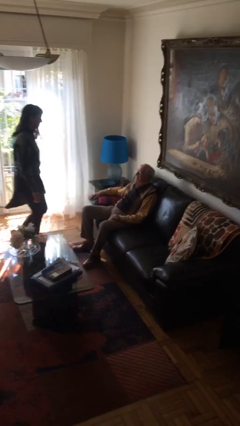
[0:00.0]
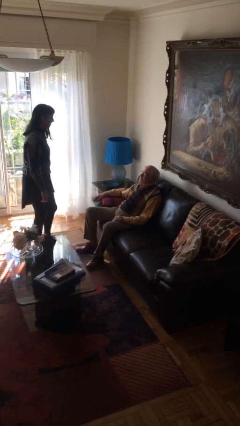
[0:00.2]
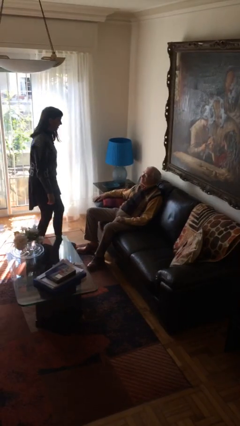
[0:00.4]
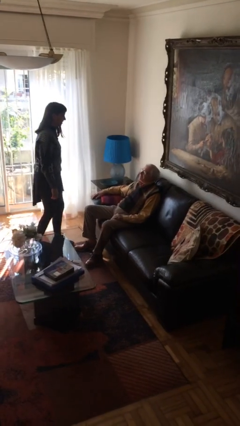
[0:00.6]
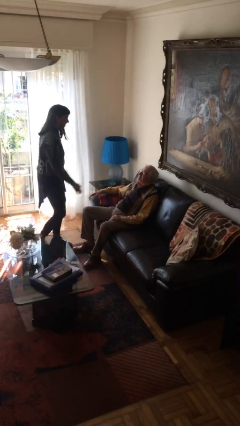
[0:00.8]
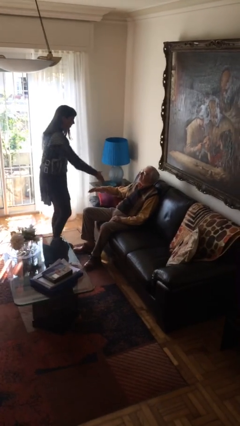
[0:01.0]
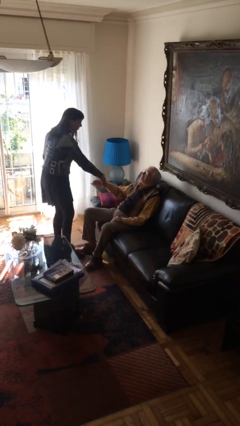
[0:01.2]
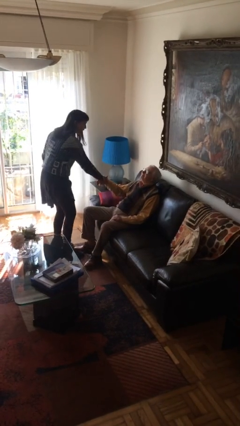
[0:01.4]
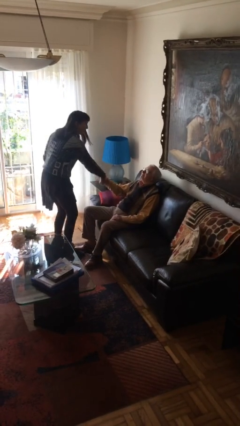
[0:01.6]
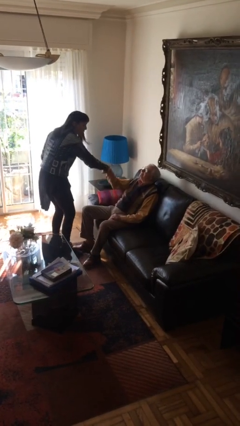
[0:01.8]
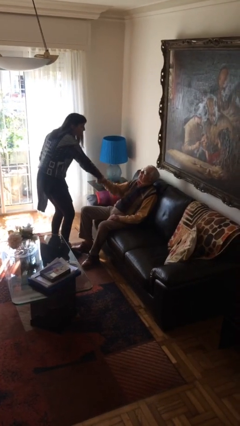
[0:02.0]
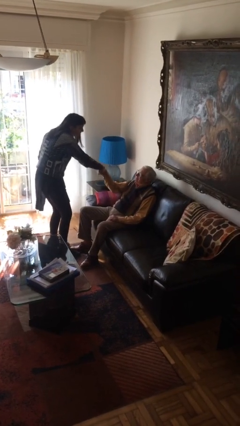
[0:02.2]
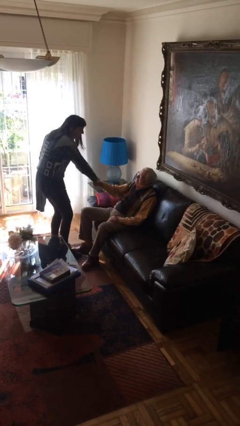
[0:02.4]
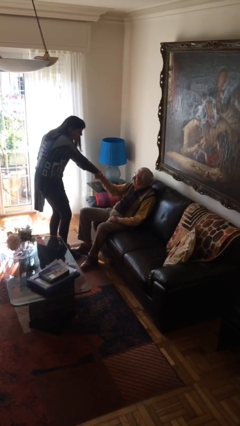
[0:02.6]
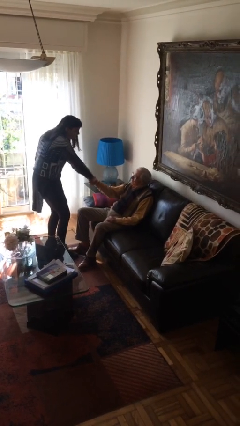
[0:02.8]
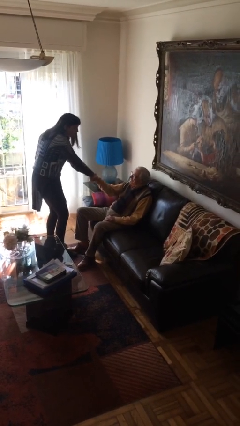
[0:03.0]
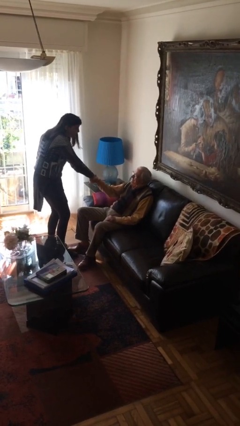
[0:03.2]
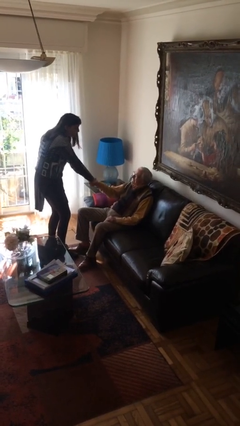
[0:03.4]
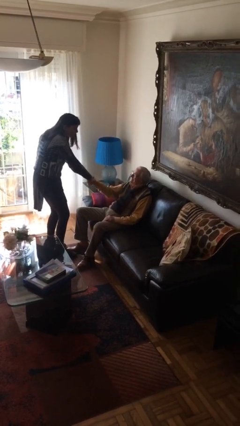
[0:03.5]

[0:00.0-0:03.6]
person shakes hand

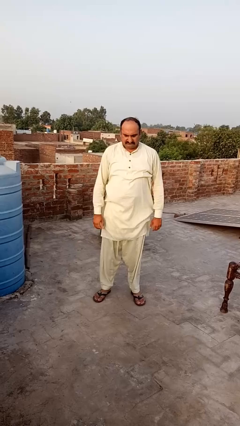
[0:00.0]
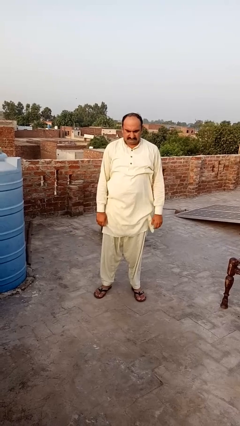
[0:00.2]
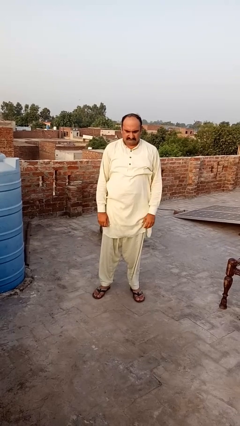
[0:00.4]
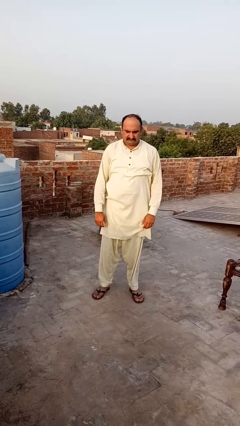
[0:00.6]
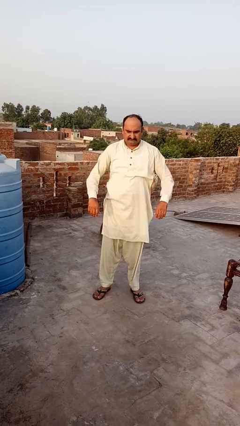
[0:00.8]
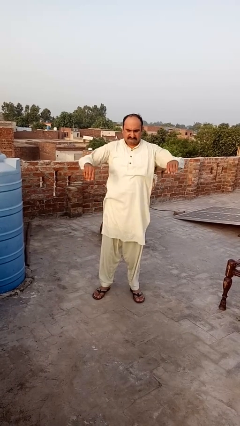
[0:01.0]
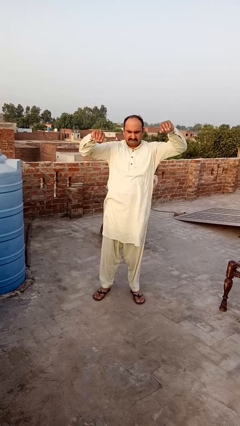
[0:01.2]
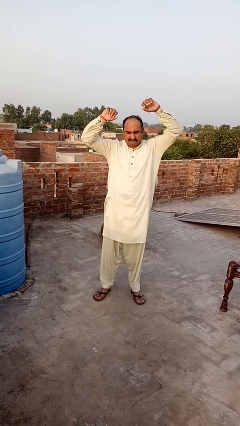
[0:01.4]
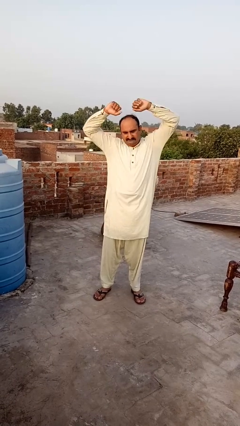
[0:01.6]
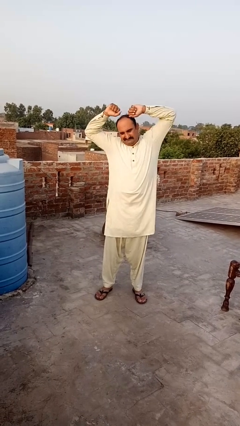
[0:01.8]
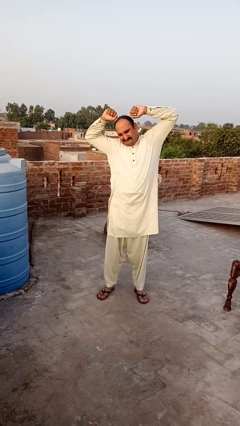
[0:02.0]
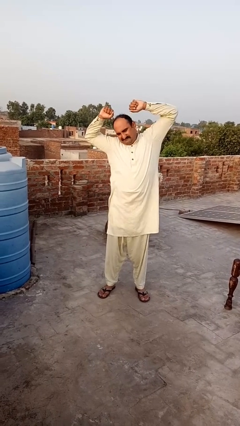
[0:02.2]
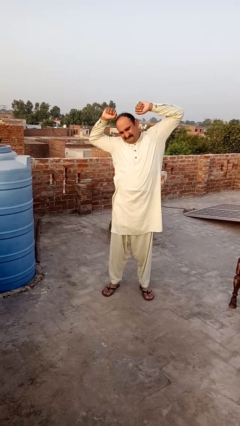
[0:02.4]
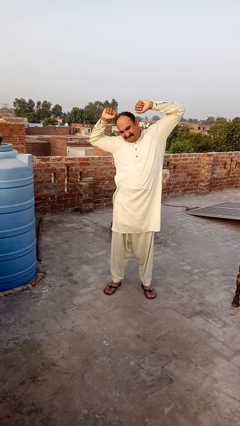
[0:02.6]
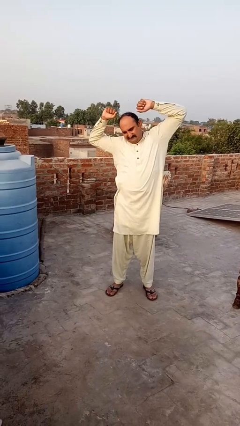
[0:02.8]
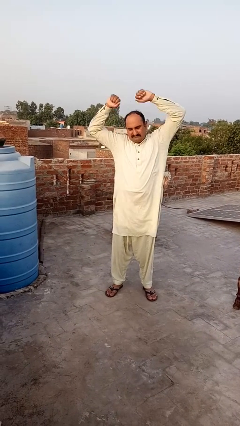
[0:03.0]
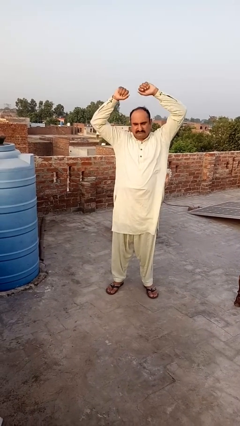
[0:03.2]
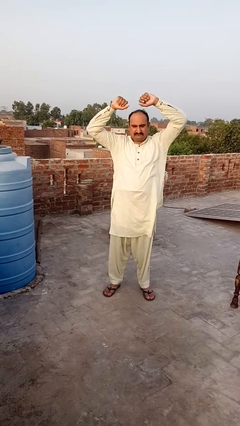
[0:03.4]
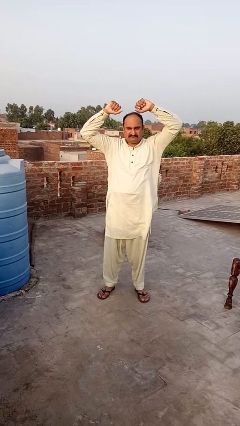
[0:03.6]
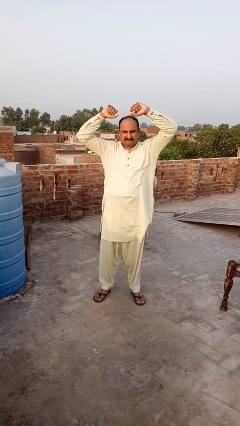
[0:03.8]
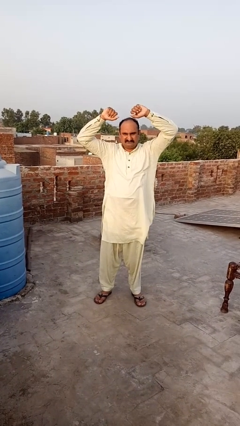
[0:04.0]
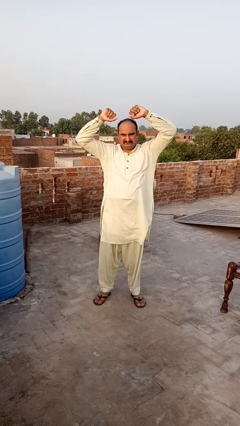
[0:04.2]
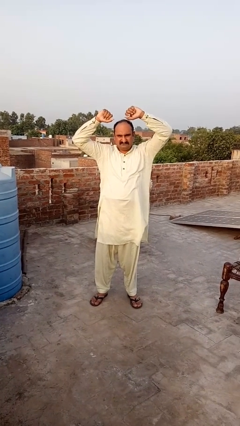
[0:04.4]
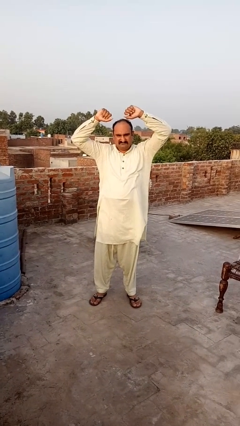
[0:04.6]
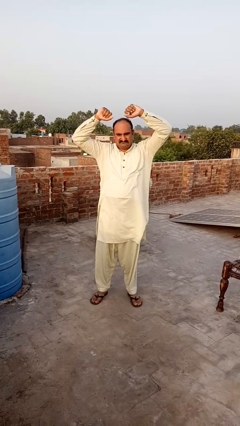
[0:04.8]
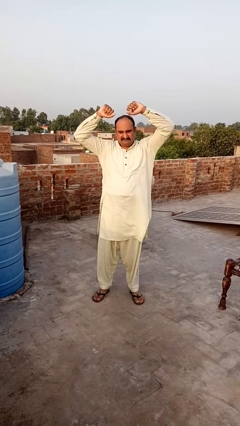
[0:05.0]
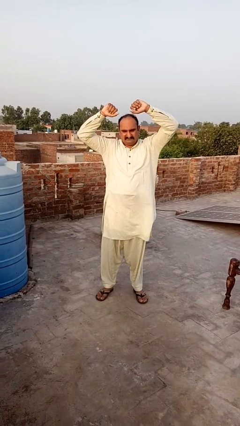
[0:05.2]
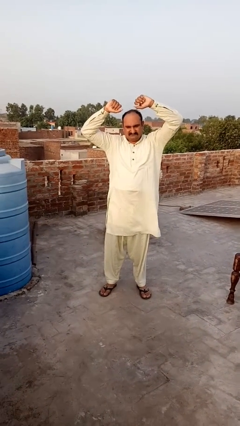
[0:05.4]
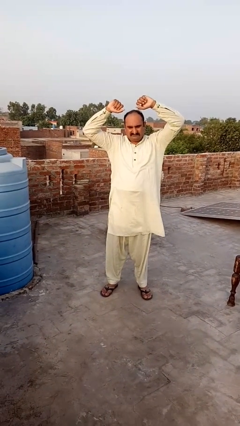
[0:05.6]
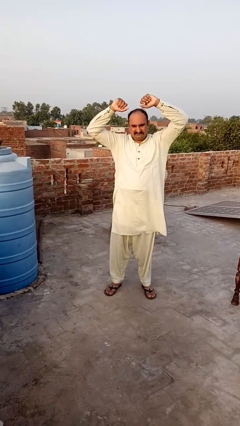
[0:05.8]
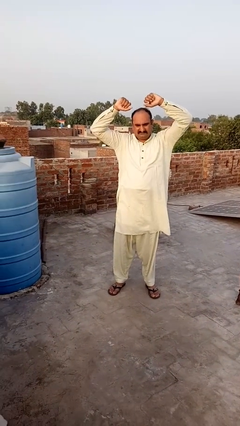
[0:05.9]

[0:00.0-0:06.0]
person stretches arms over head

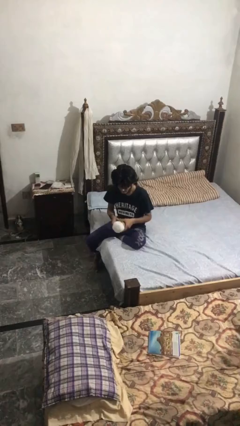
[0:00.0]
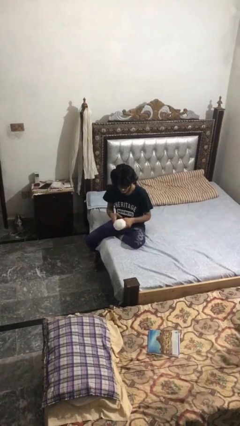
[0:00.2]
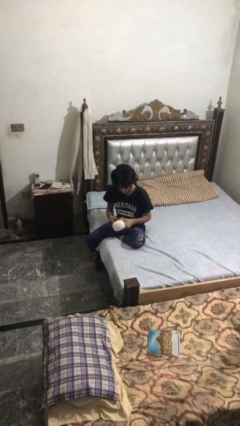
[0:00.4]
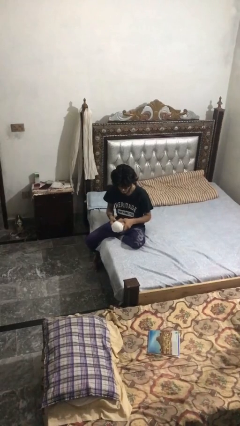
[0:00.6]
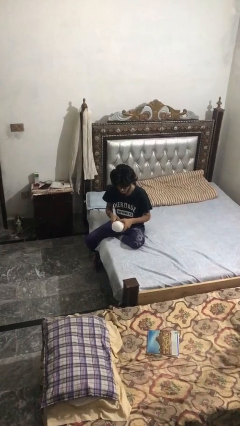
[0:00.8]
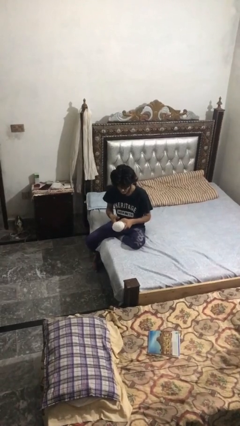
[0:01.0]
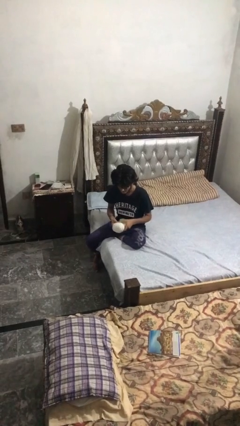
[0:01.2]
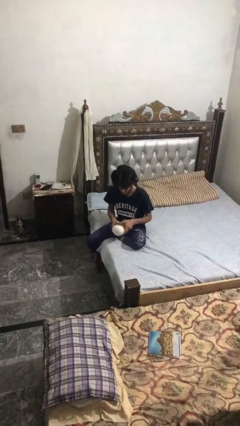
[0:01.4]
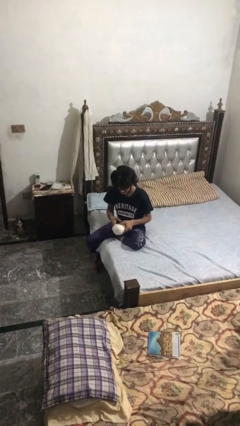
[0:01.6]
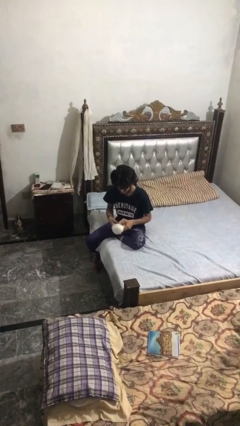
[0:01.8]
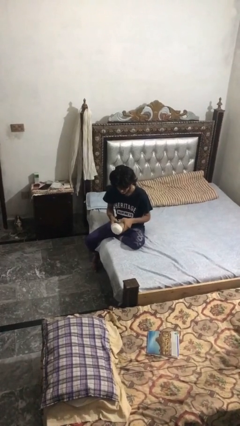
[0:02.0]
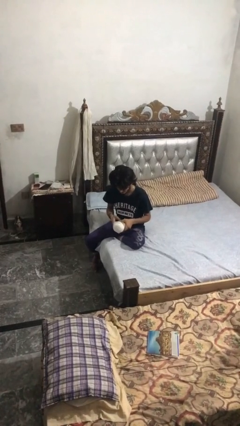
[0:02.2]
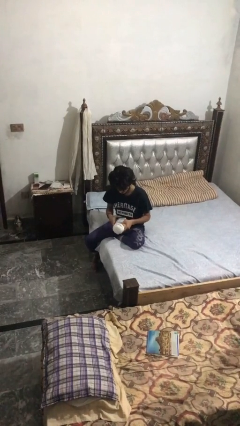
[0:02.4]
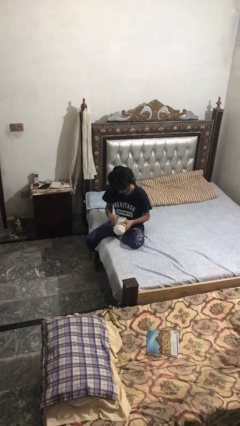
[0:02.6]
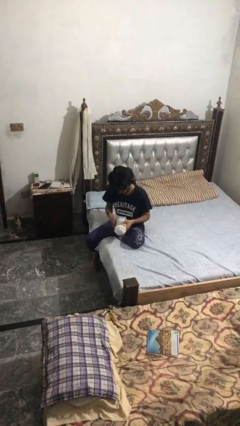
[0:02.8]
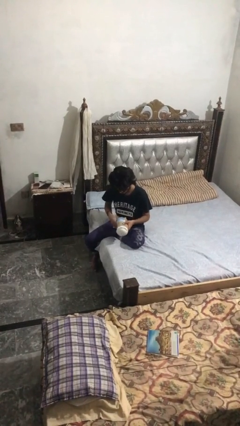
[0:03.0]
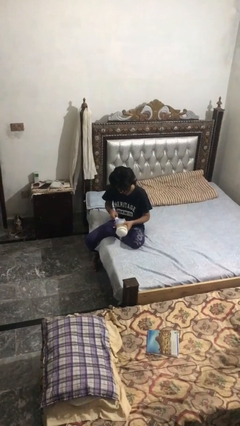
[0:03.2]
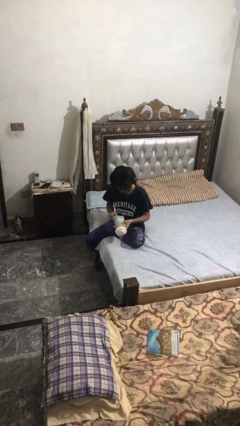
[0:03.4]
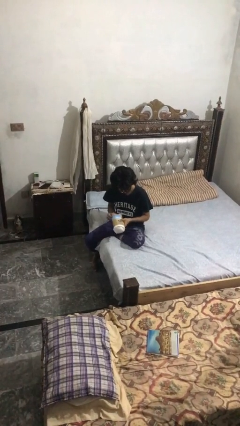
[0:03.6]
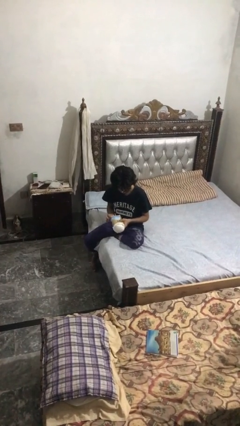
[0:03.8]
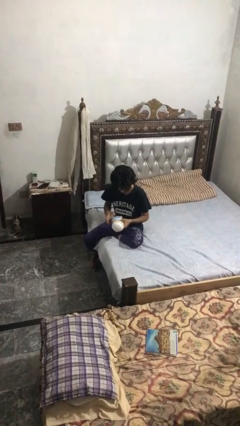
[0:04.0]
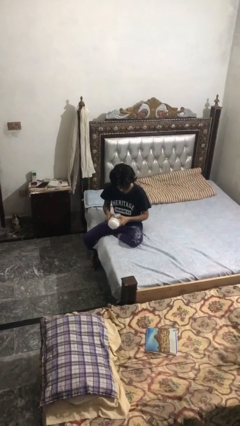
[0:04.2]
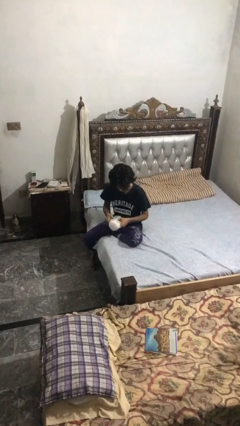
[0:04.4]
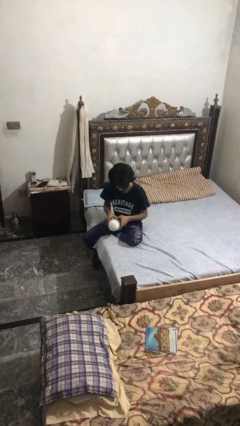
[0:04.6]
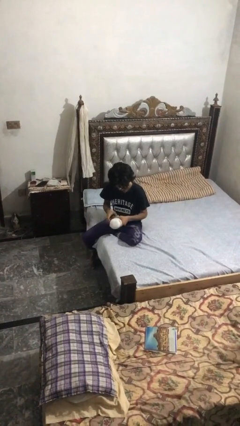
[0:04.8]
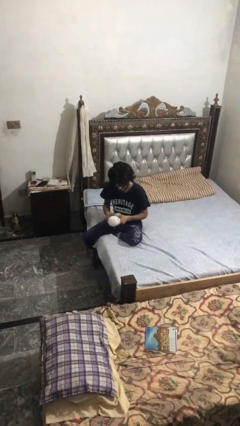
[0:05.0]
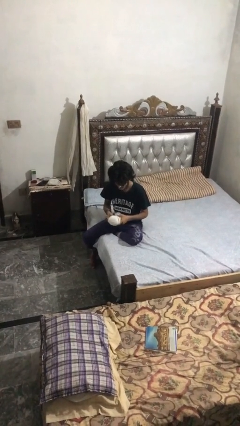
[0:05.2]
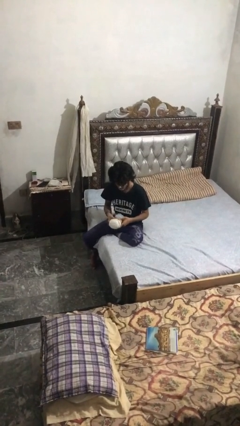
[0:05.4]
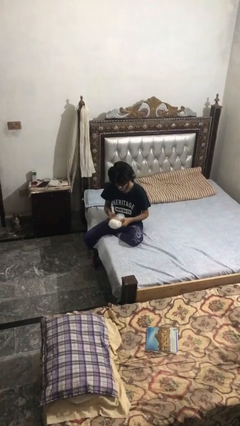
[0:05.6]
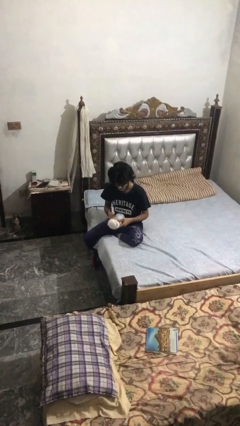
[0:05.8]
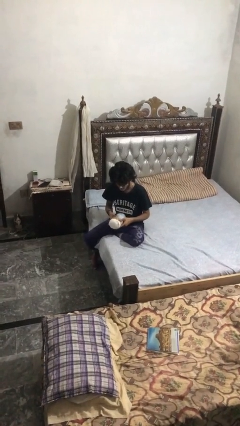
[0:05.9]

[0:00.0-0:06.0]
person squeezes object

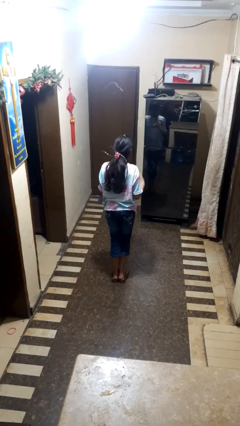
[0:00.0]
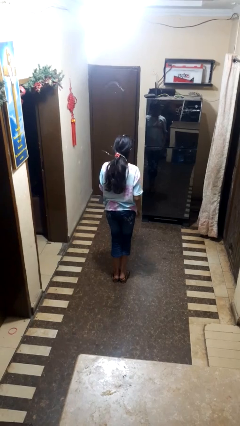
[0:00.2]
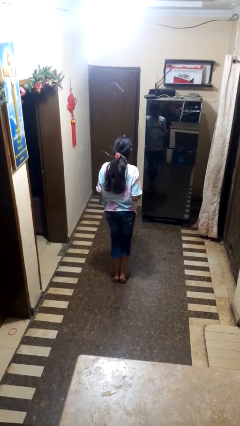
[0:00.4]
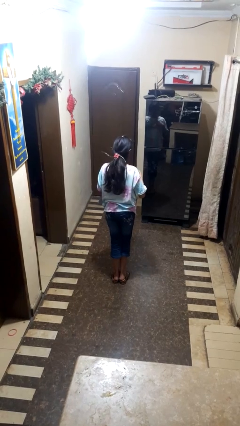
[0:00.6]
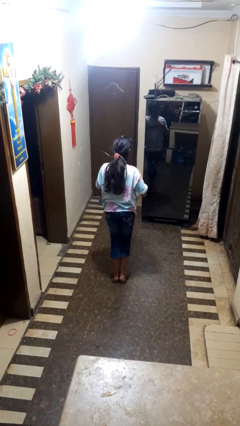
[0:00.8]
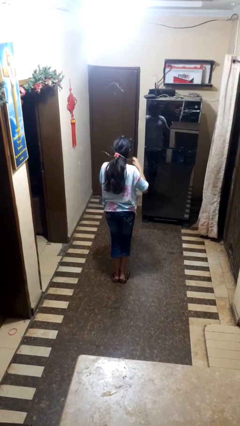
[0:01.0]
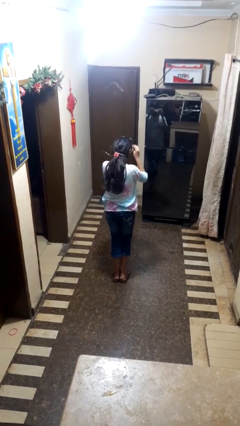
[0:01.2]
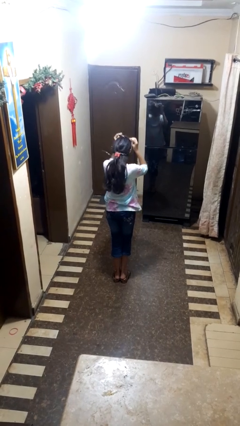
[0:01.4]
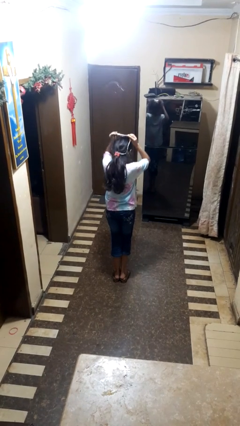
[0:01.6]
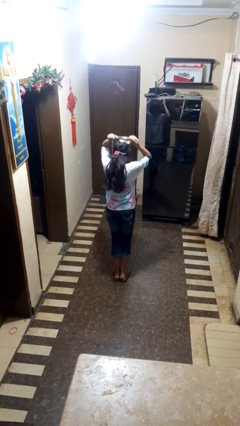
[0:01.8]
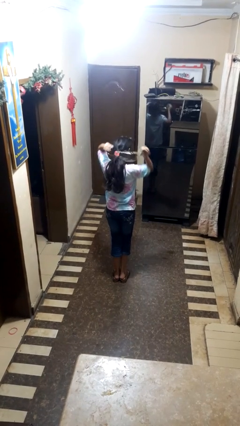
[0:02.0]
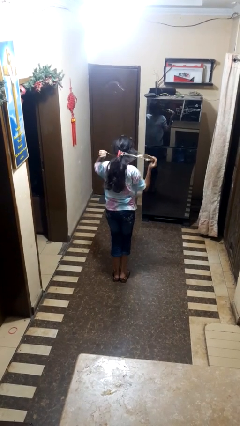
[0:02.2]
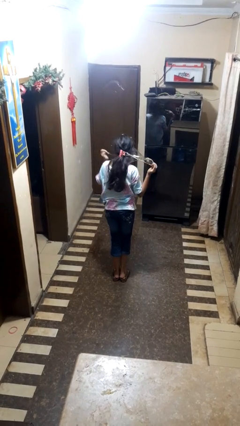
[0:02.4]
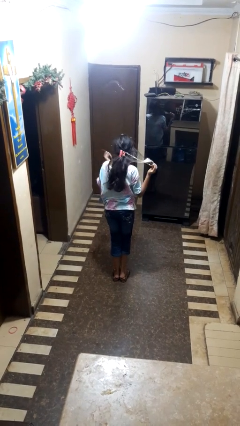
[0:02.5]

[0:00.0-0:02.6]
person takes off necklace
